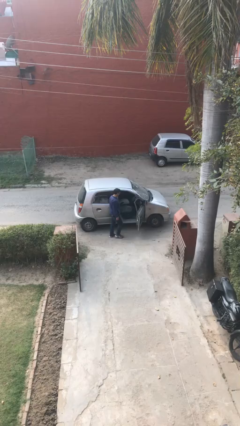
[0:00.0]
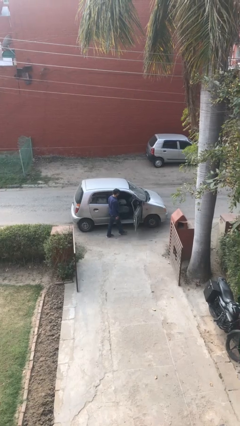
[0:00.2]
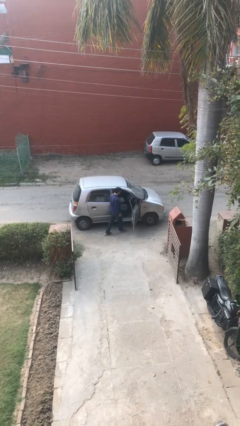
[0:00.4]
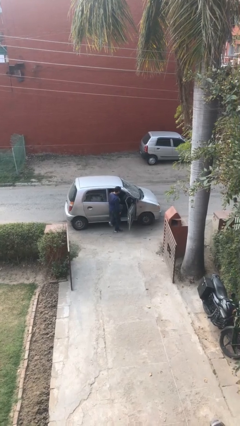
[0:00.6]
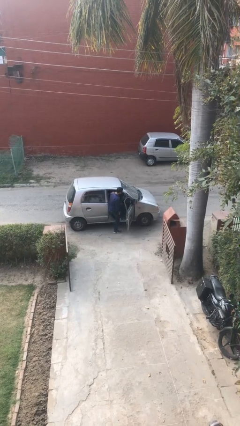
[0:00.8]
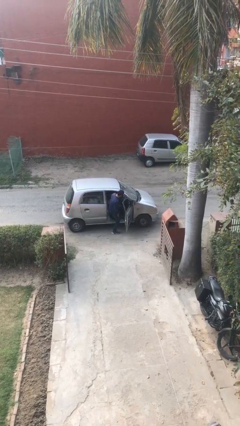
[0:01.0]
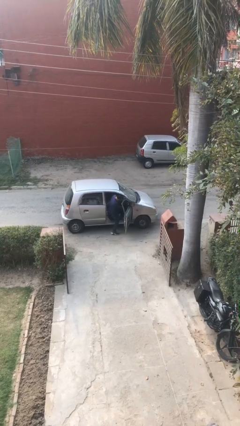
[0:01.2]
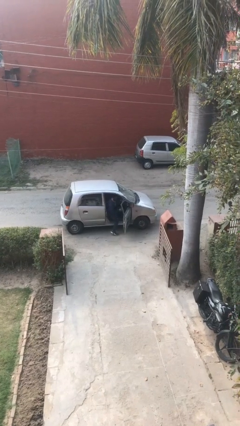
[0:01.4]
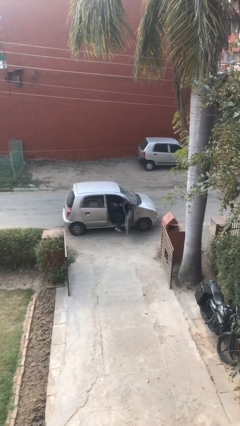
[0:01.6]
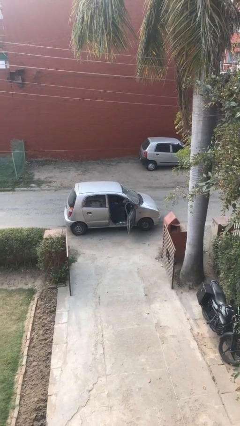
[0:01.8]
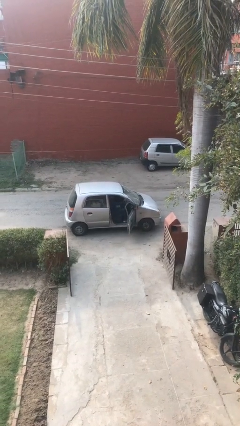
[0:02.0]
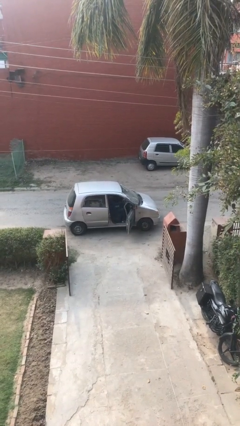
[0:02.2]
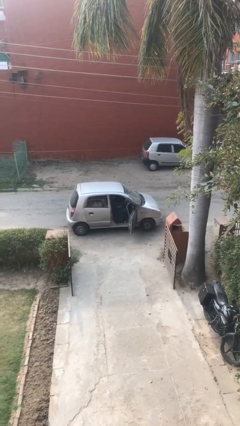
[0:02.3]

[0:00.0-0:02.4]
person enters car

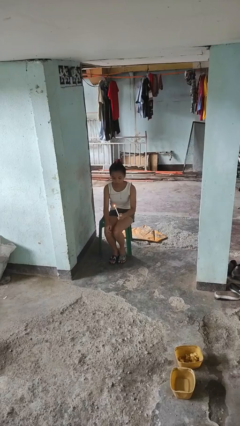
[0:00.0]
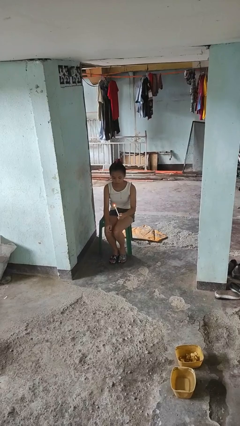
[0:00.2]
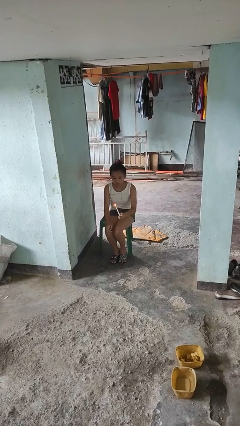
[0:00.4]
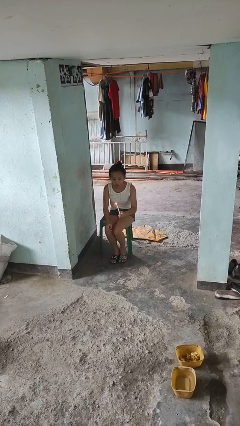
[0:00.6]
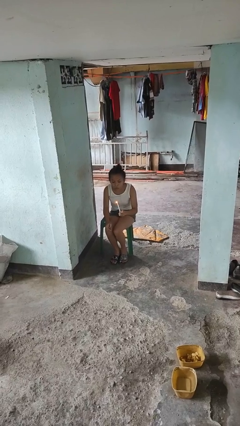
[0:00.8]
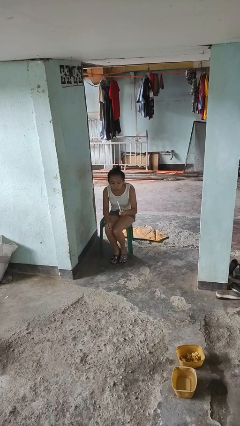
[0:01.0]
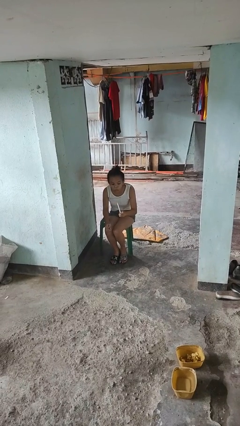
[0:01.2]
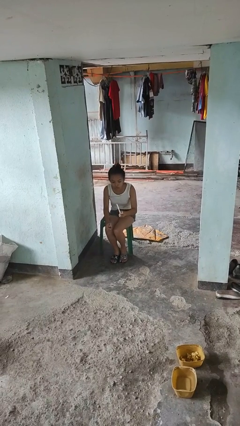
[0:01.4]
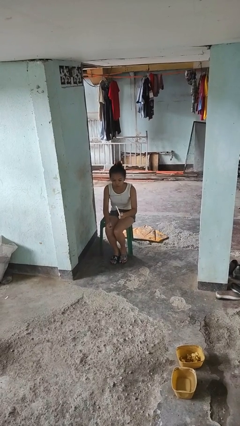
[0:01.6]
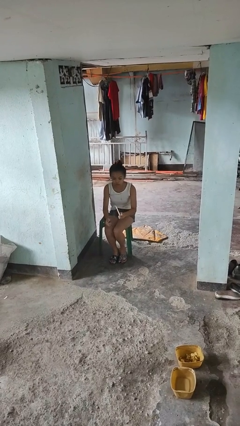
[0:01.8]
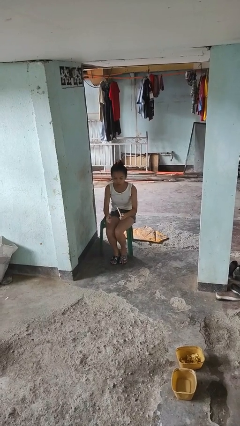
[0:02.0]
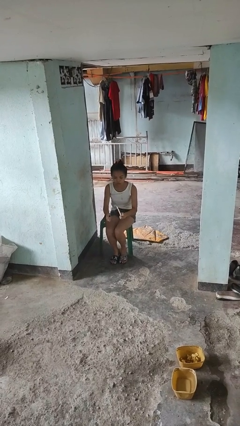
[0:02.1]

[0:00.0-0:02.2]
person extinguishes candle

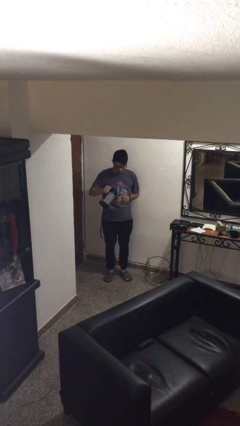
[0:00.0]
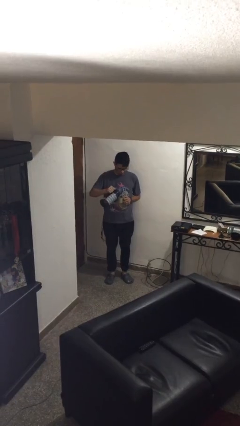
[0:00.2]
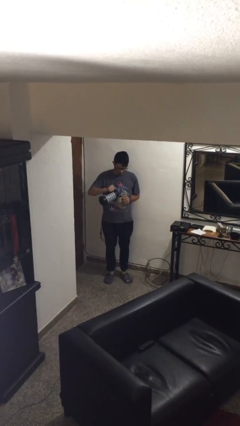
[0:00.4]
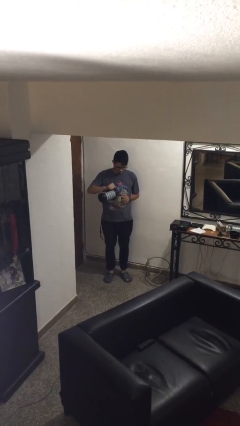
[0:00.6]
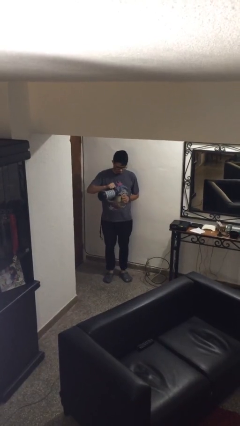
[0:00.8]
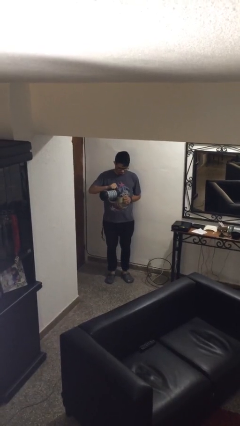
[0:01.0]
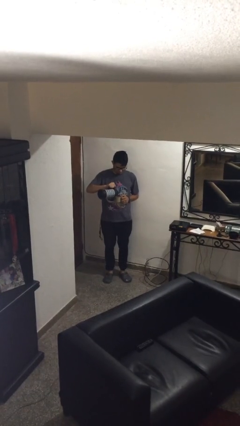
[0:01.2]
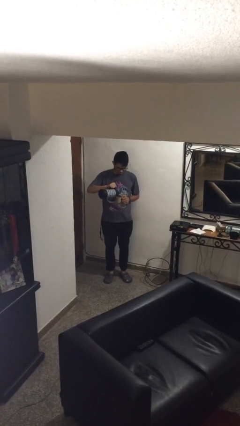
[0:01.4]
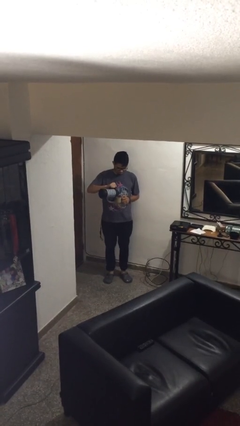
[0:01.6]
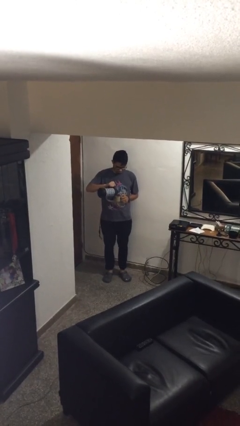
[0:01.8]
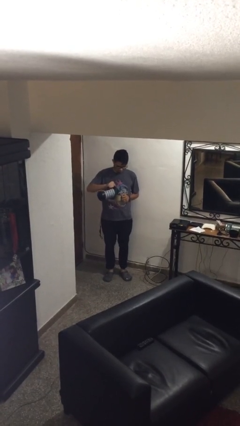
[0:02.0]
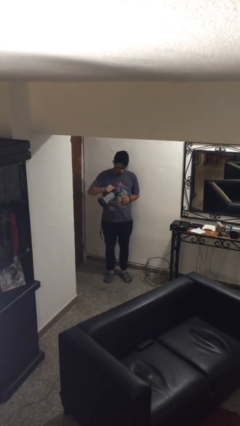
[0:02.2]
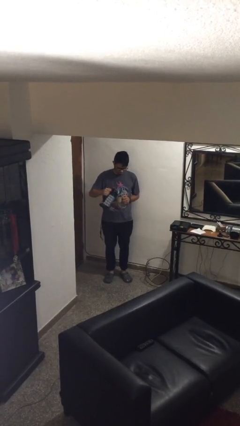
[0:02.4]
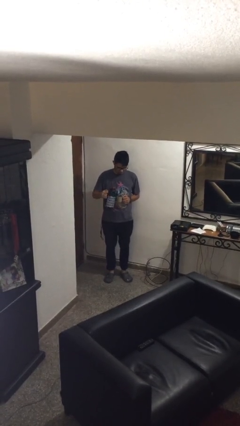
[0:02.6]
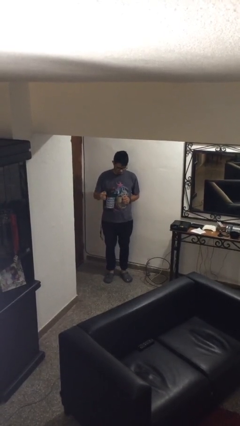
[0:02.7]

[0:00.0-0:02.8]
person pours coffee into mug

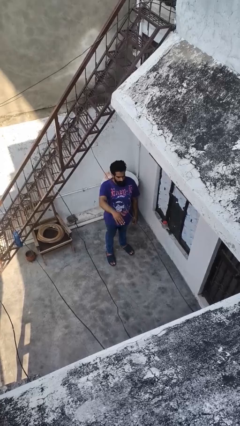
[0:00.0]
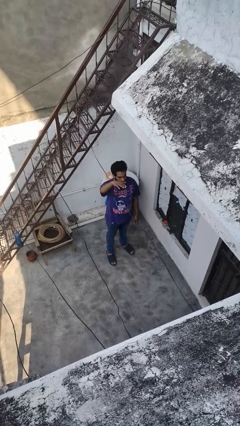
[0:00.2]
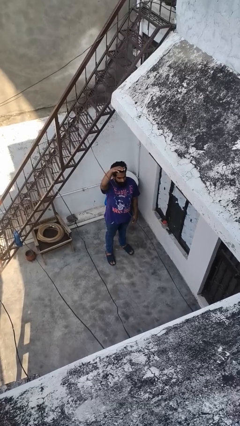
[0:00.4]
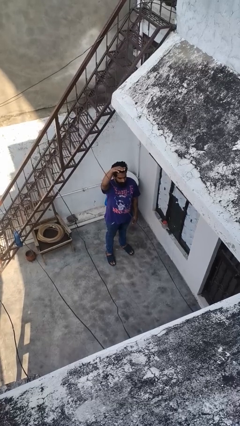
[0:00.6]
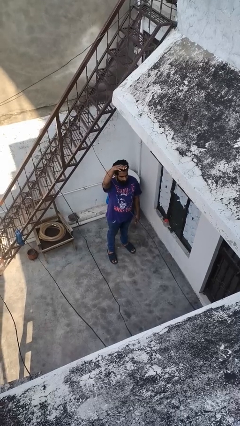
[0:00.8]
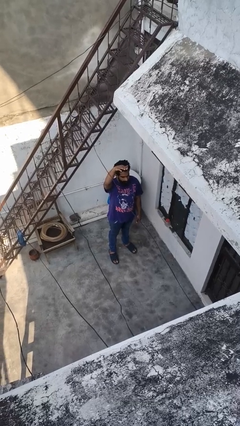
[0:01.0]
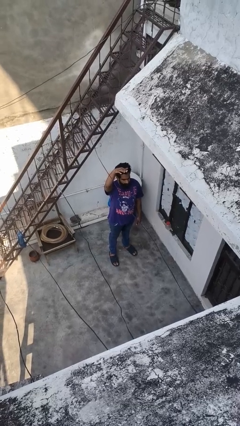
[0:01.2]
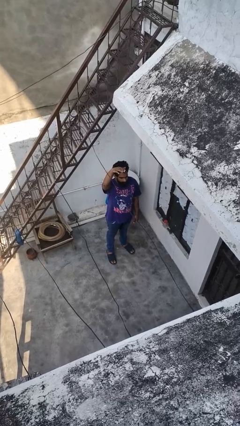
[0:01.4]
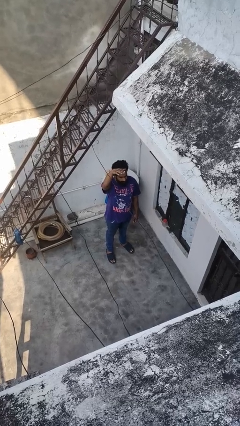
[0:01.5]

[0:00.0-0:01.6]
person gestures swipe up

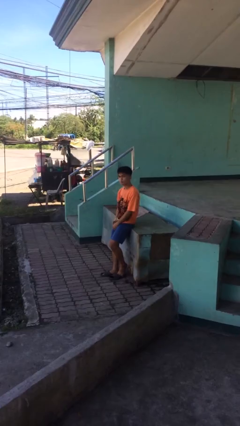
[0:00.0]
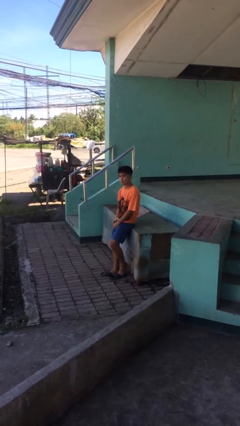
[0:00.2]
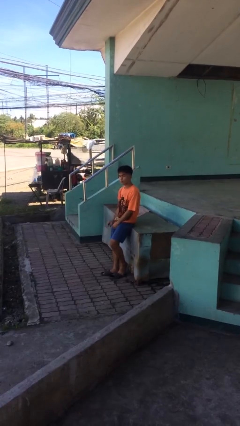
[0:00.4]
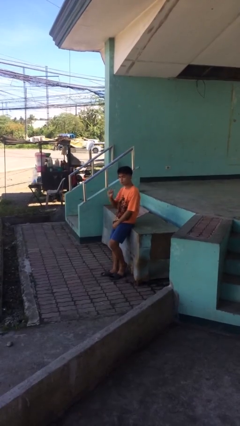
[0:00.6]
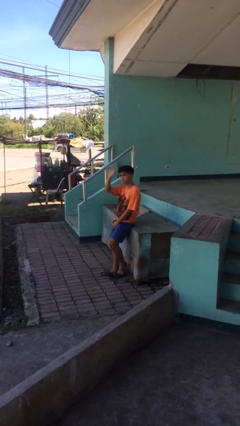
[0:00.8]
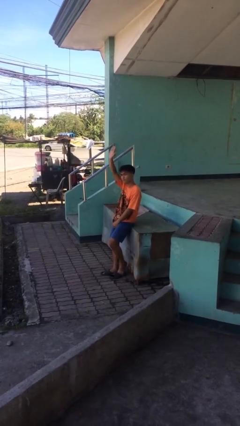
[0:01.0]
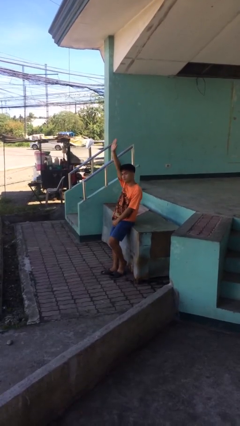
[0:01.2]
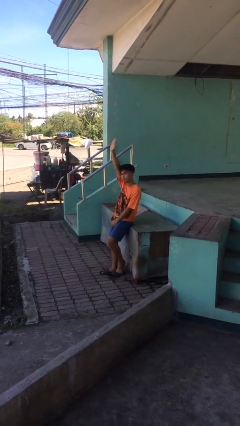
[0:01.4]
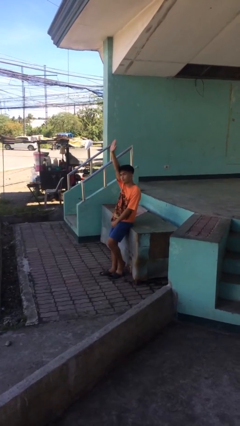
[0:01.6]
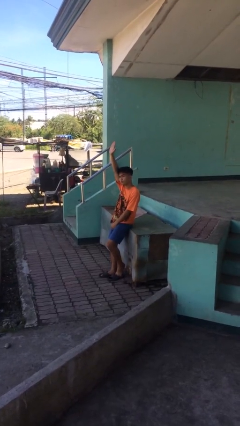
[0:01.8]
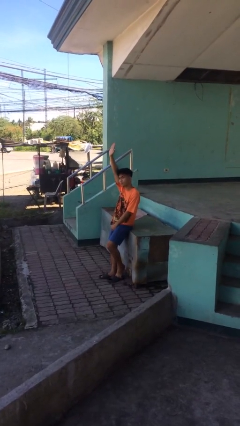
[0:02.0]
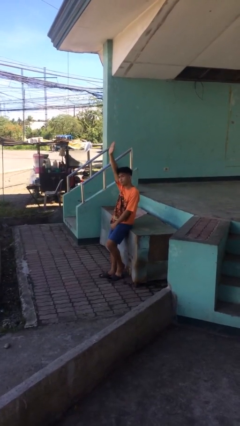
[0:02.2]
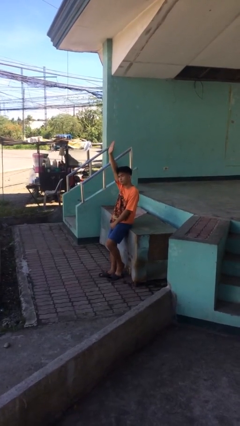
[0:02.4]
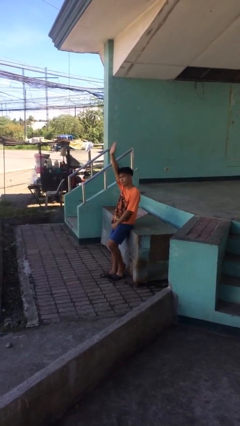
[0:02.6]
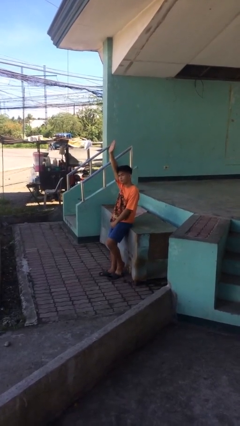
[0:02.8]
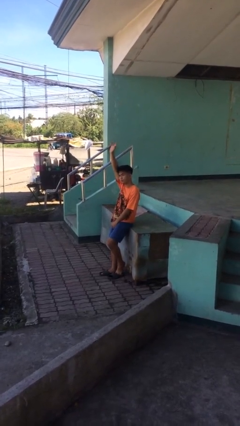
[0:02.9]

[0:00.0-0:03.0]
person gestures raise hand

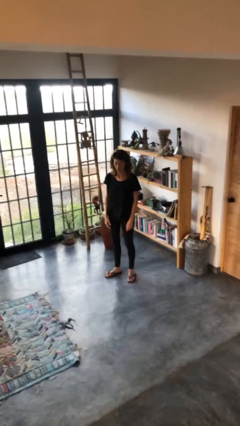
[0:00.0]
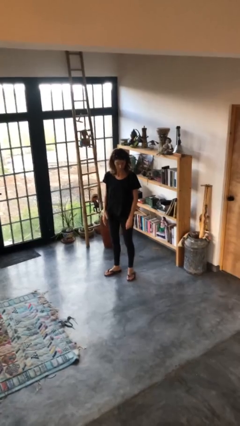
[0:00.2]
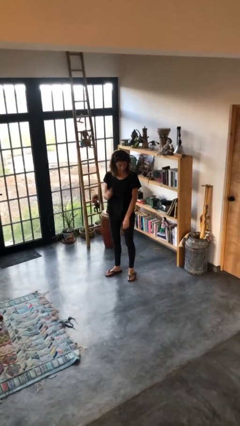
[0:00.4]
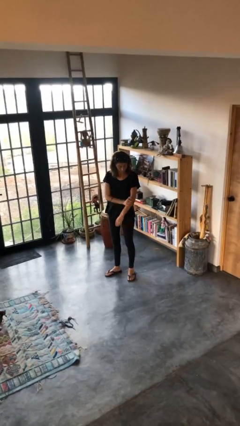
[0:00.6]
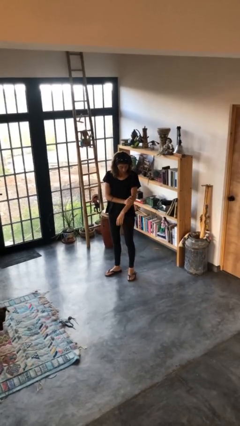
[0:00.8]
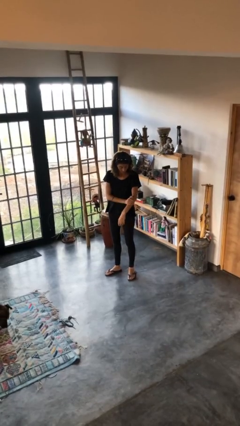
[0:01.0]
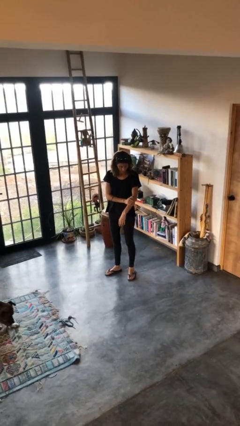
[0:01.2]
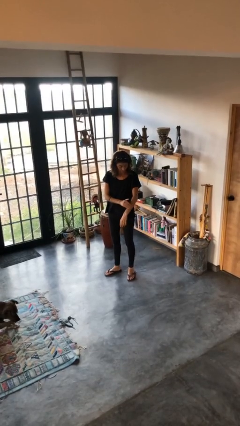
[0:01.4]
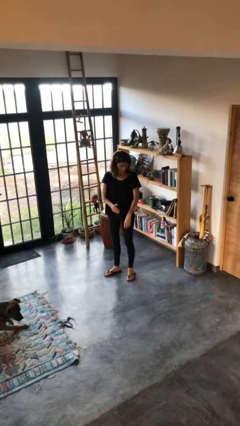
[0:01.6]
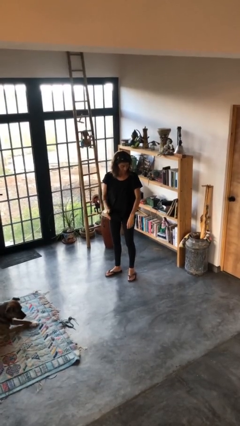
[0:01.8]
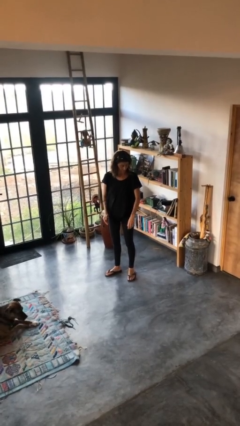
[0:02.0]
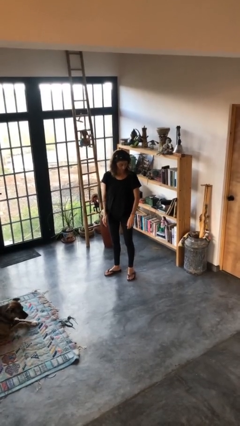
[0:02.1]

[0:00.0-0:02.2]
person swats bug

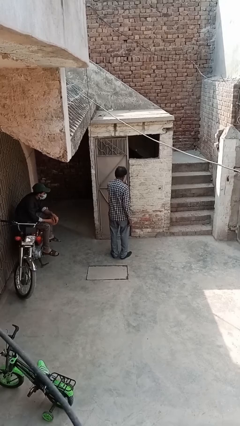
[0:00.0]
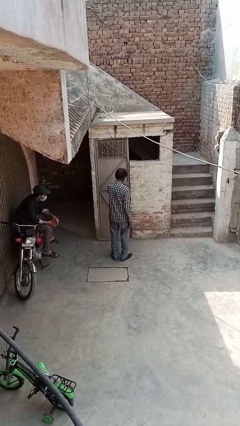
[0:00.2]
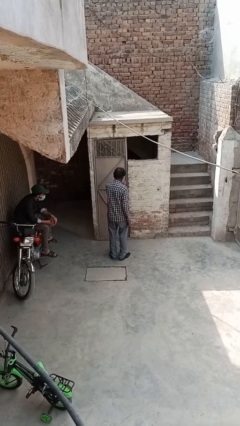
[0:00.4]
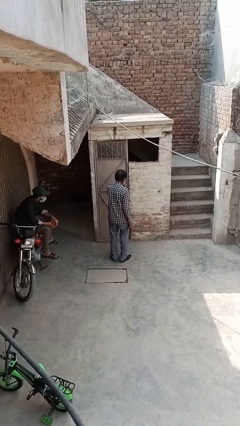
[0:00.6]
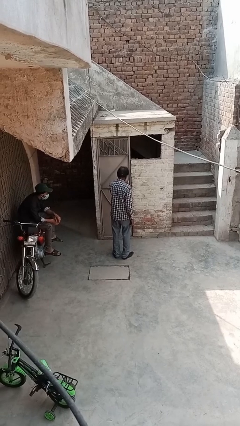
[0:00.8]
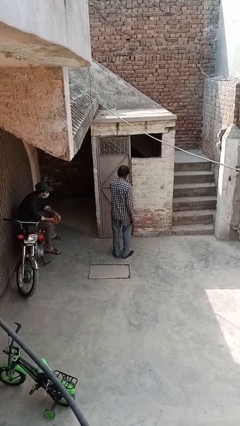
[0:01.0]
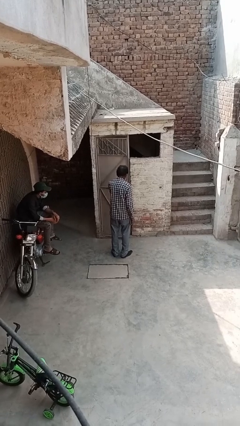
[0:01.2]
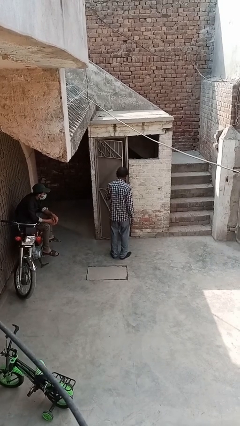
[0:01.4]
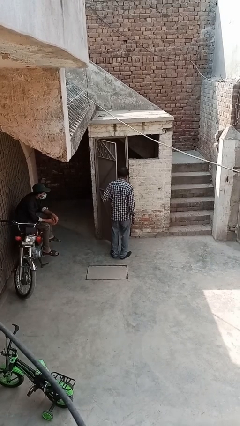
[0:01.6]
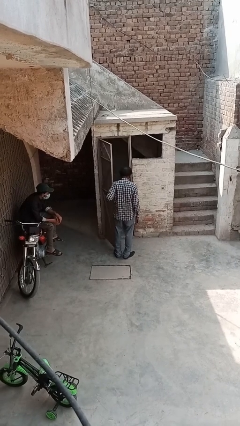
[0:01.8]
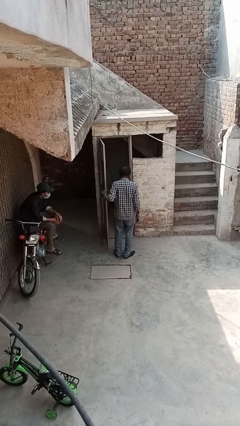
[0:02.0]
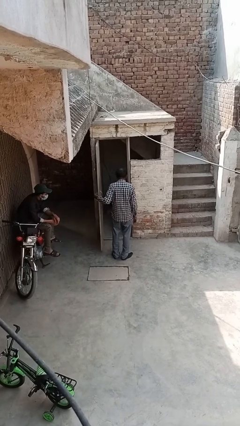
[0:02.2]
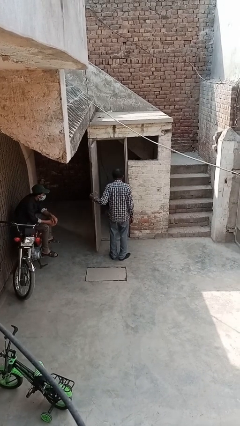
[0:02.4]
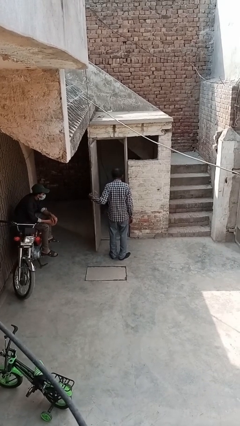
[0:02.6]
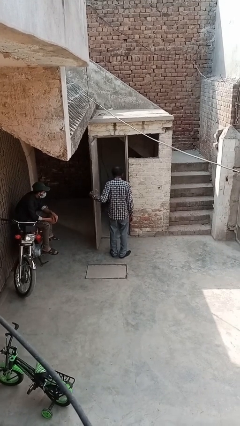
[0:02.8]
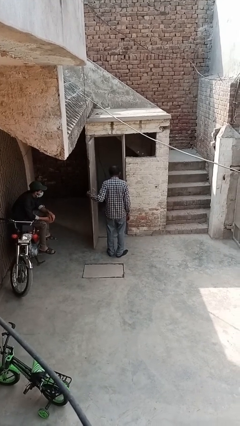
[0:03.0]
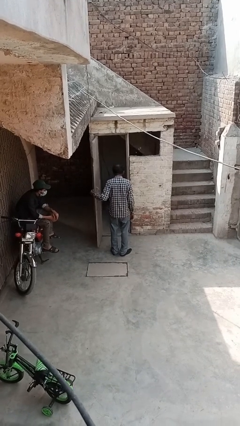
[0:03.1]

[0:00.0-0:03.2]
person opens facility door
